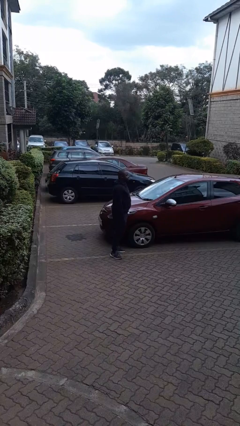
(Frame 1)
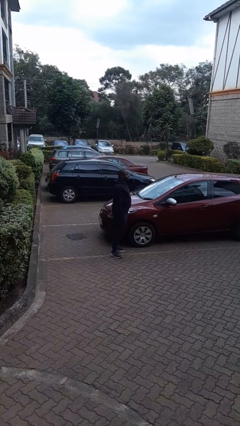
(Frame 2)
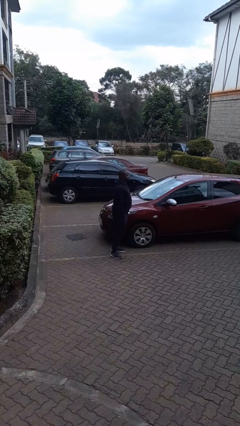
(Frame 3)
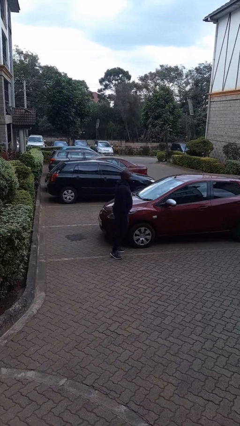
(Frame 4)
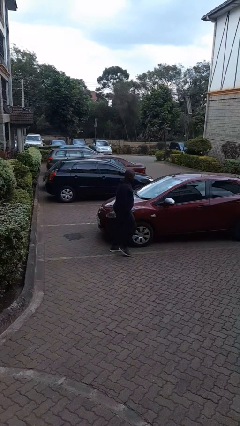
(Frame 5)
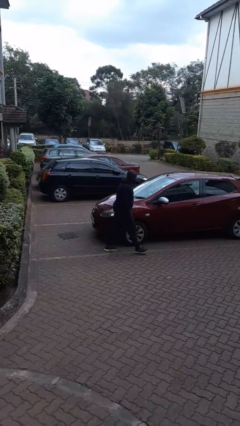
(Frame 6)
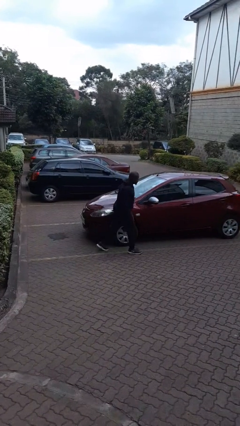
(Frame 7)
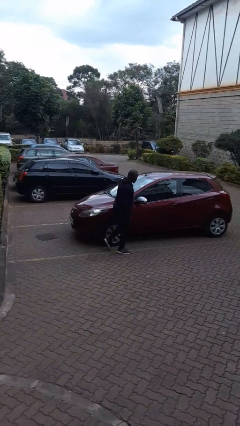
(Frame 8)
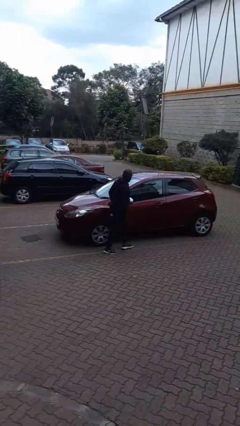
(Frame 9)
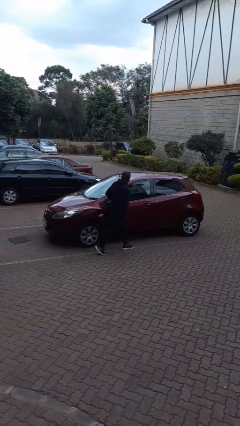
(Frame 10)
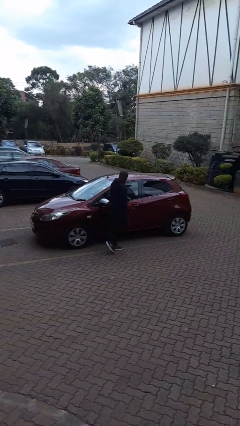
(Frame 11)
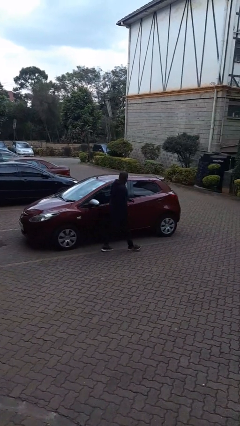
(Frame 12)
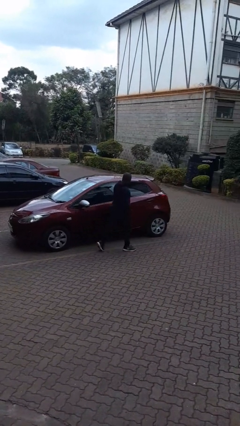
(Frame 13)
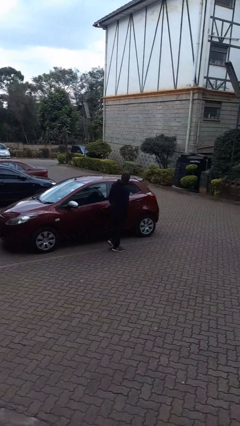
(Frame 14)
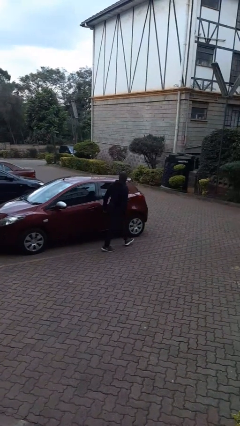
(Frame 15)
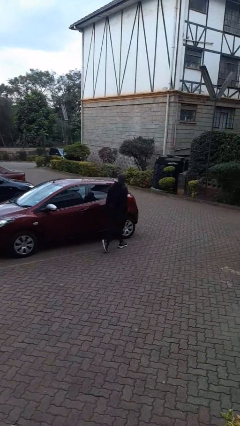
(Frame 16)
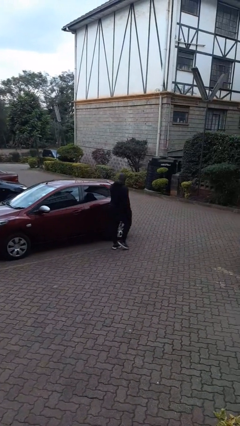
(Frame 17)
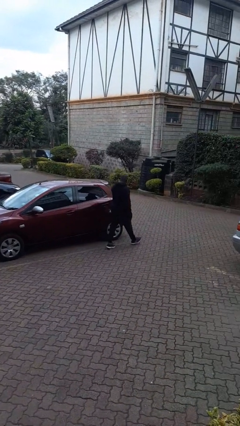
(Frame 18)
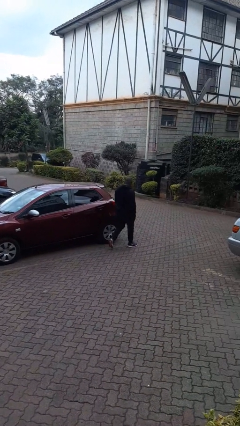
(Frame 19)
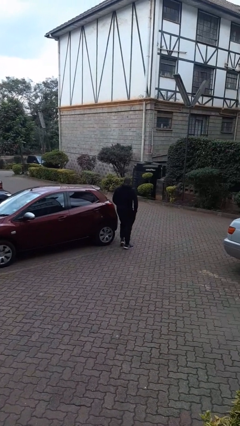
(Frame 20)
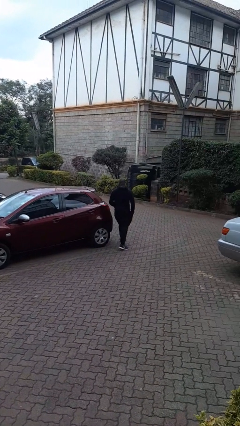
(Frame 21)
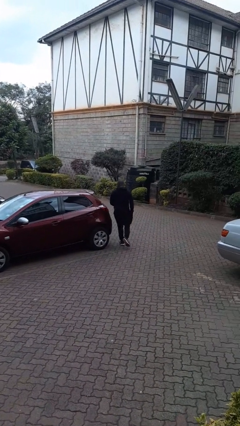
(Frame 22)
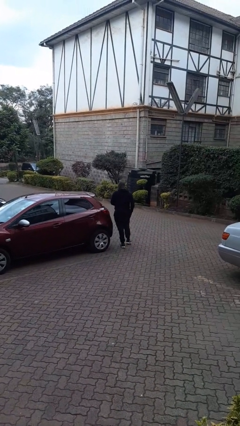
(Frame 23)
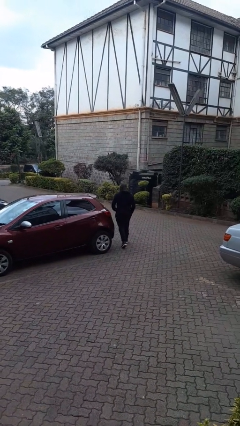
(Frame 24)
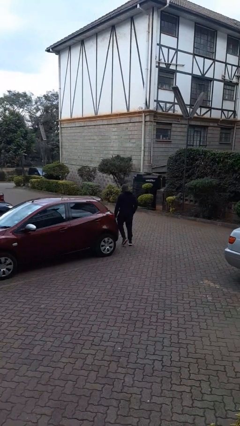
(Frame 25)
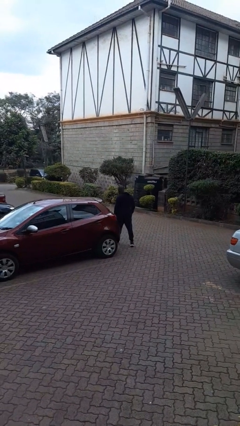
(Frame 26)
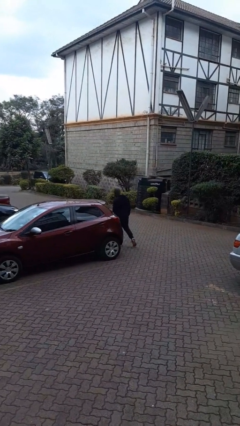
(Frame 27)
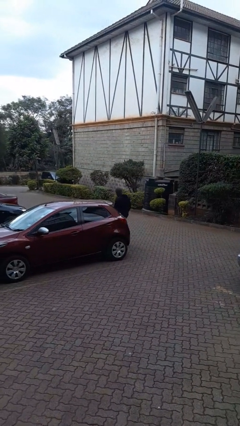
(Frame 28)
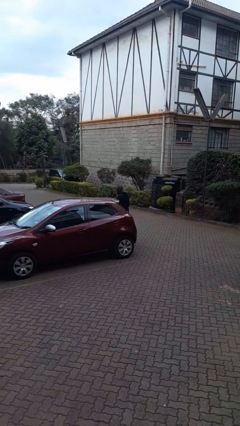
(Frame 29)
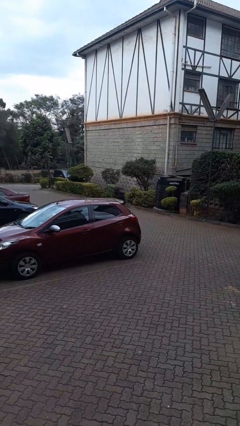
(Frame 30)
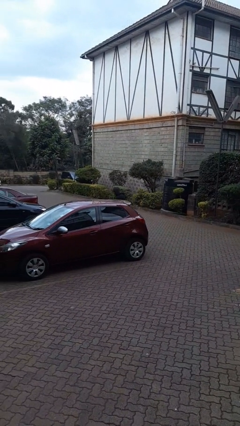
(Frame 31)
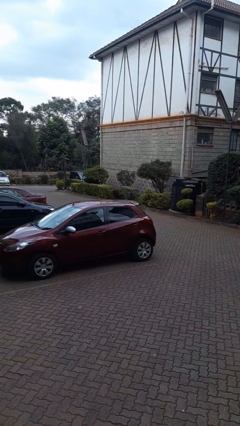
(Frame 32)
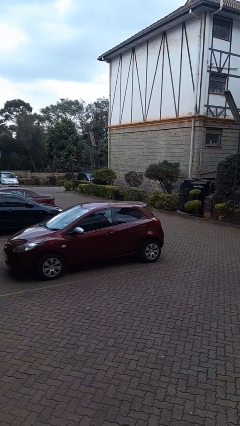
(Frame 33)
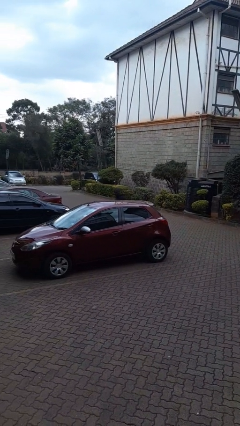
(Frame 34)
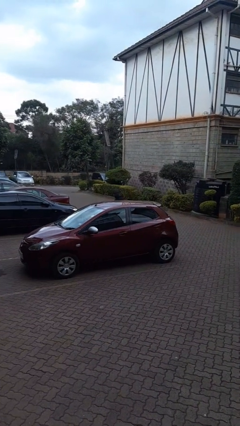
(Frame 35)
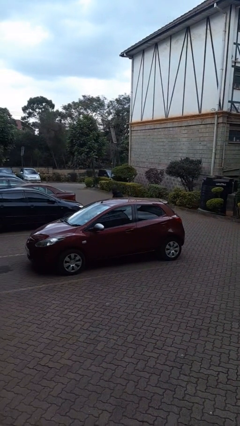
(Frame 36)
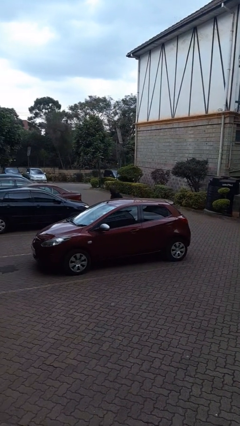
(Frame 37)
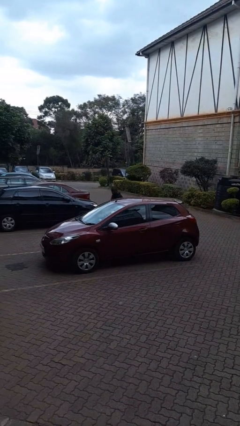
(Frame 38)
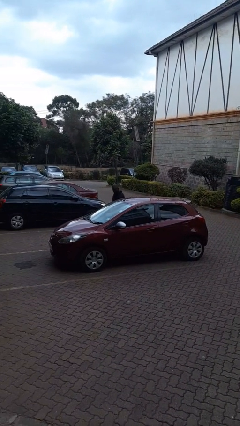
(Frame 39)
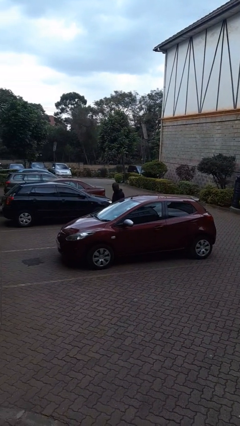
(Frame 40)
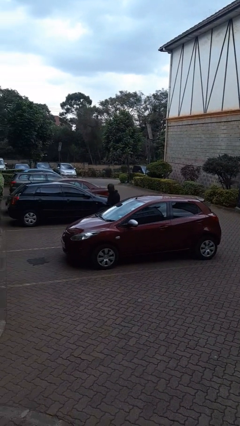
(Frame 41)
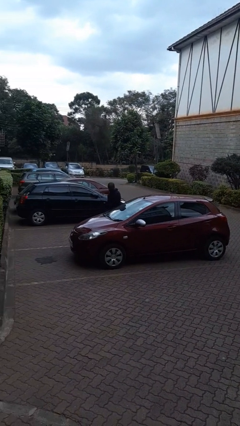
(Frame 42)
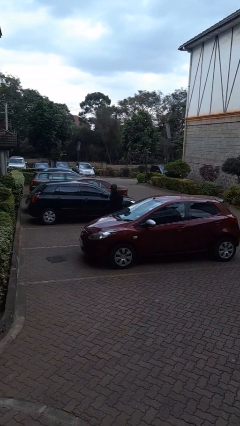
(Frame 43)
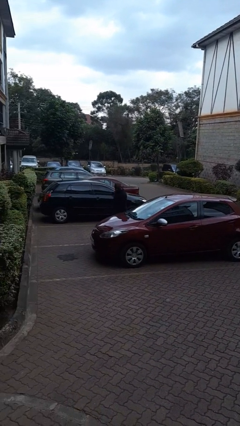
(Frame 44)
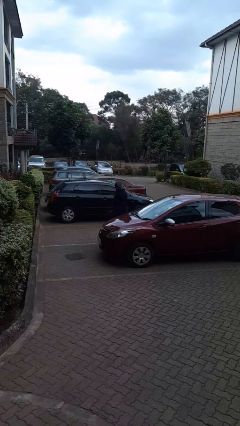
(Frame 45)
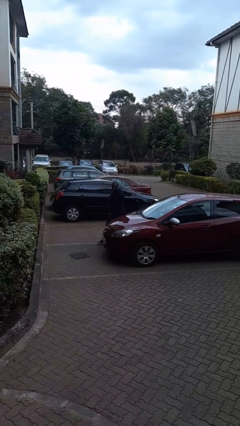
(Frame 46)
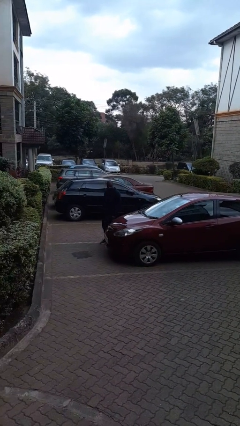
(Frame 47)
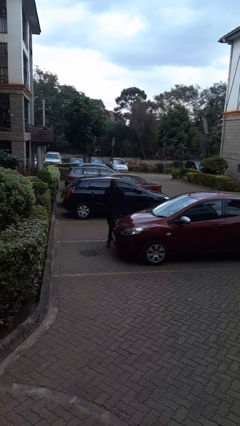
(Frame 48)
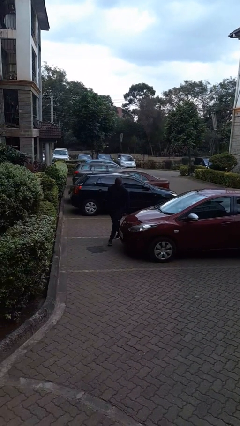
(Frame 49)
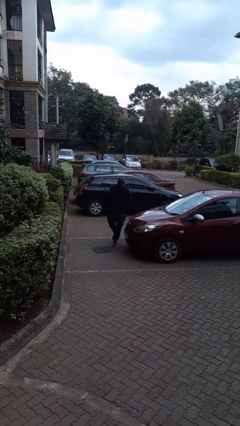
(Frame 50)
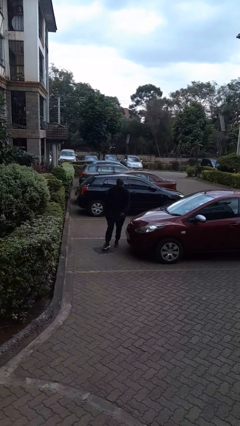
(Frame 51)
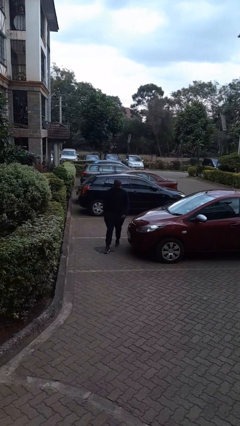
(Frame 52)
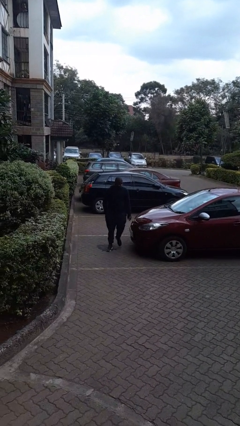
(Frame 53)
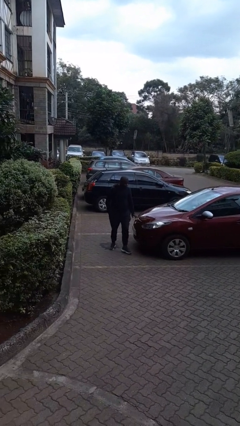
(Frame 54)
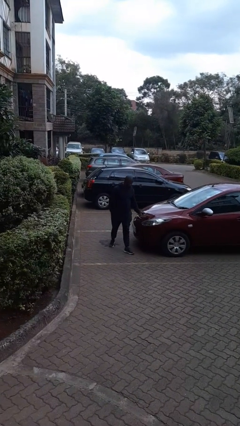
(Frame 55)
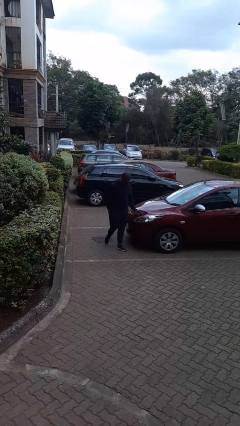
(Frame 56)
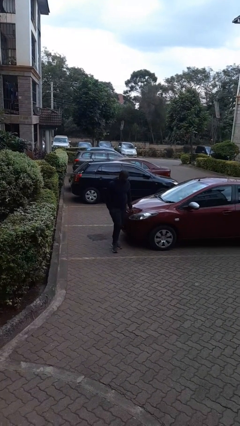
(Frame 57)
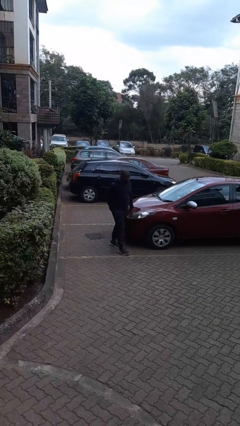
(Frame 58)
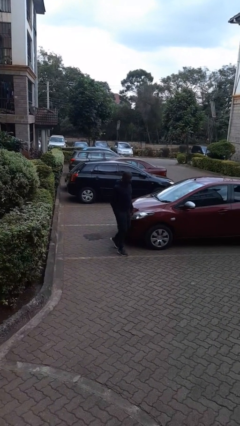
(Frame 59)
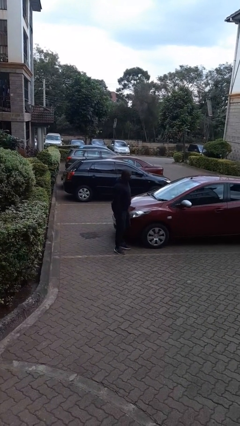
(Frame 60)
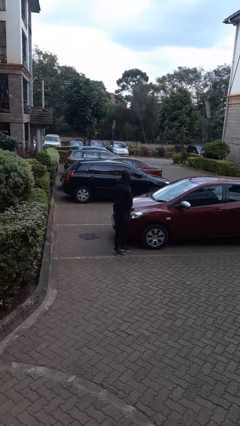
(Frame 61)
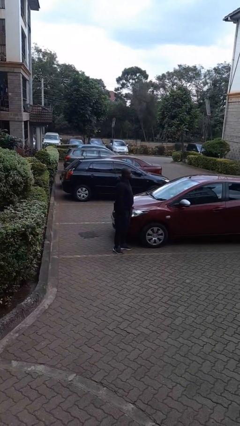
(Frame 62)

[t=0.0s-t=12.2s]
person walks around car

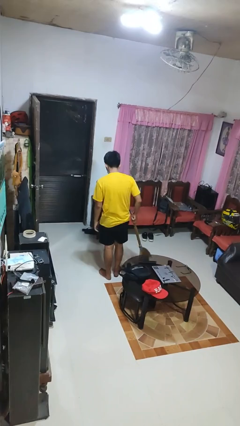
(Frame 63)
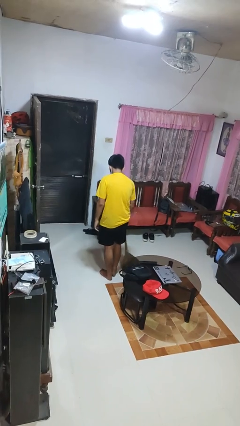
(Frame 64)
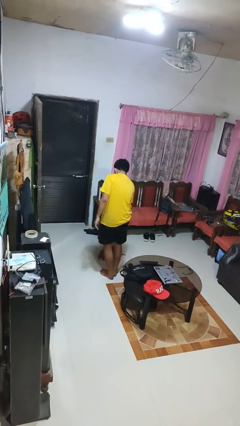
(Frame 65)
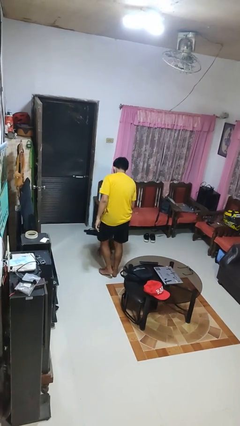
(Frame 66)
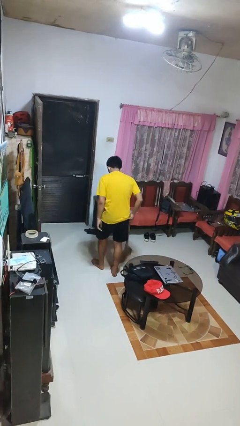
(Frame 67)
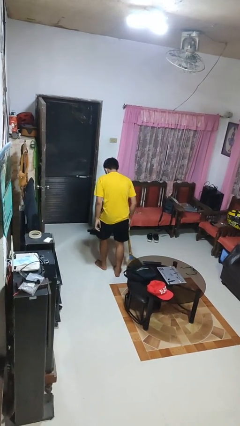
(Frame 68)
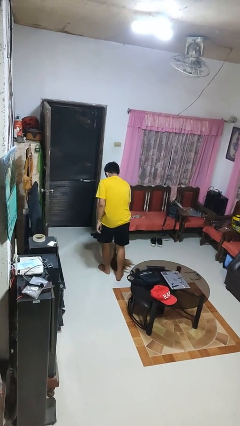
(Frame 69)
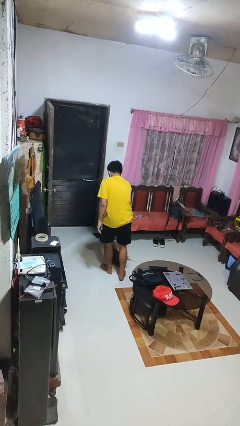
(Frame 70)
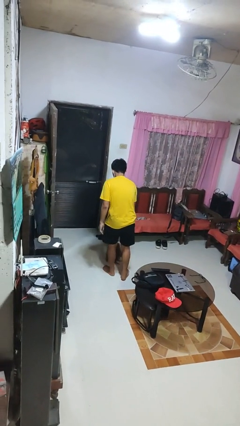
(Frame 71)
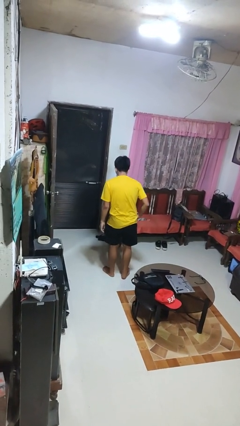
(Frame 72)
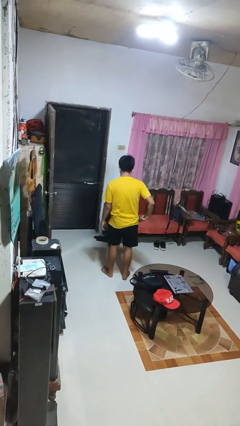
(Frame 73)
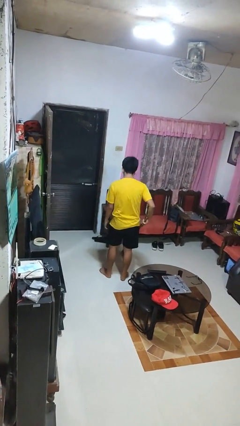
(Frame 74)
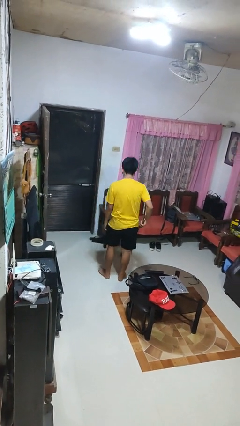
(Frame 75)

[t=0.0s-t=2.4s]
person sweeps floor

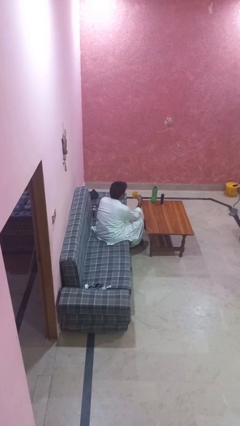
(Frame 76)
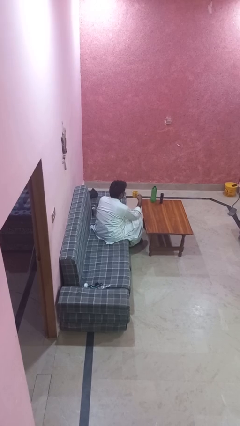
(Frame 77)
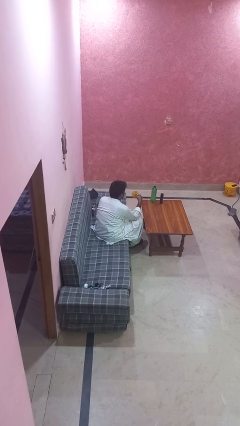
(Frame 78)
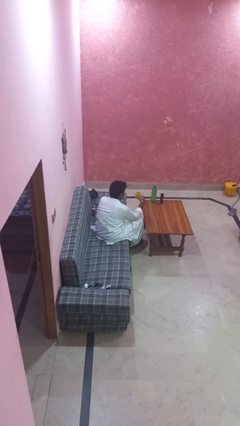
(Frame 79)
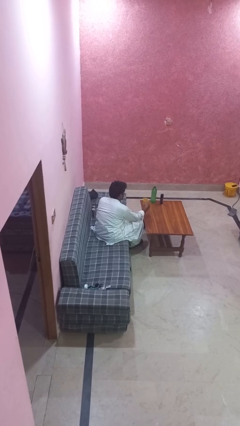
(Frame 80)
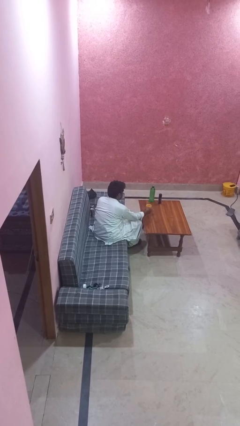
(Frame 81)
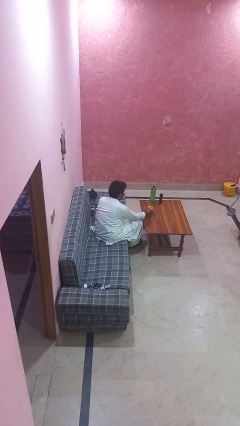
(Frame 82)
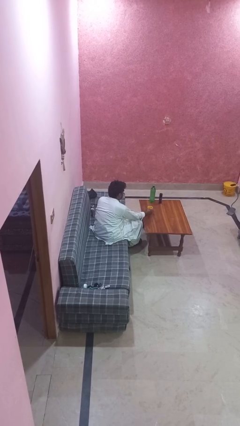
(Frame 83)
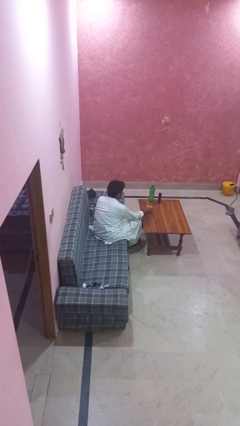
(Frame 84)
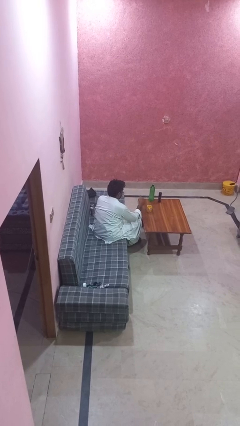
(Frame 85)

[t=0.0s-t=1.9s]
person puts down object on table

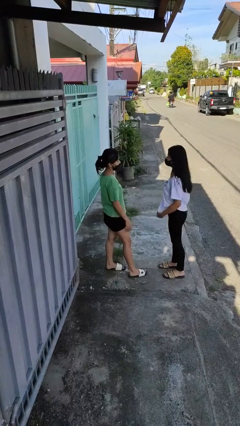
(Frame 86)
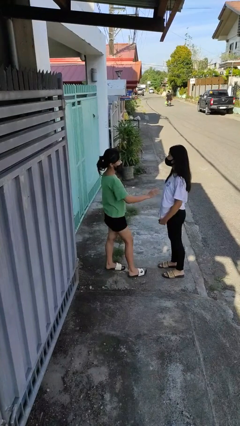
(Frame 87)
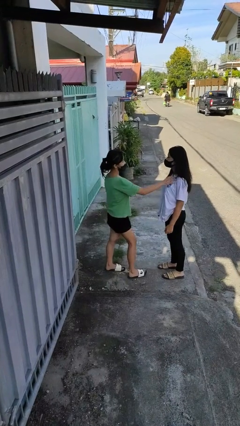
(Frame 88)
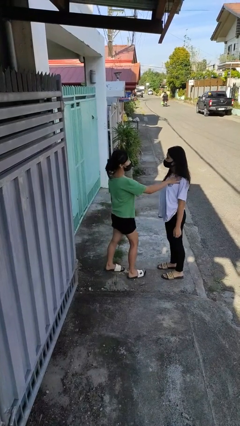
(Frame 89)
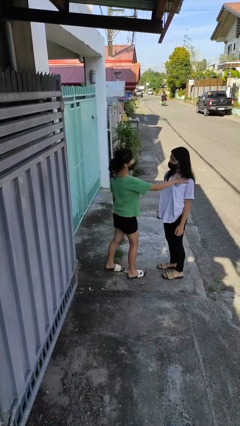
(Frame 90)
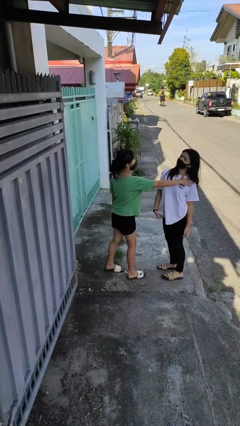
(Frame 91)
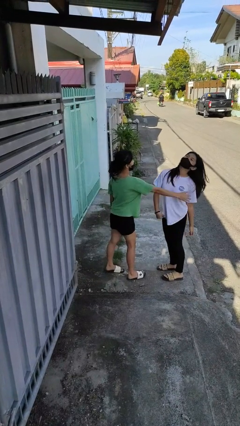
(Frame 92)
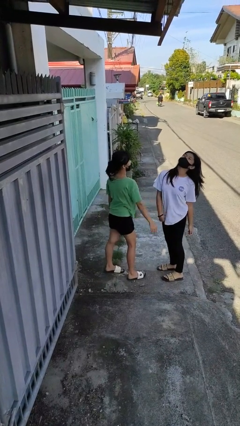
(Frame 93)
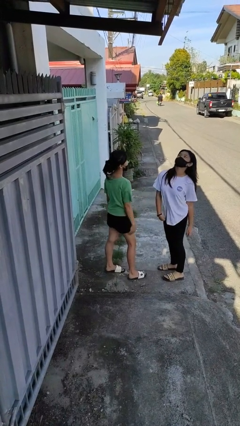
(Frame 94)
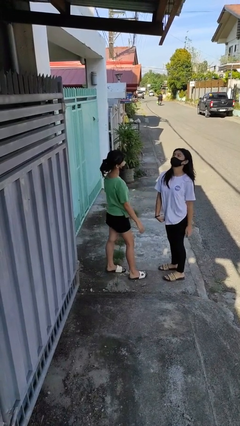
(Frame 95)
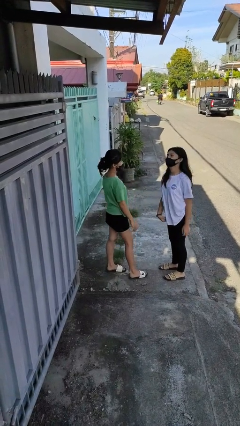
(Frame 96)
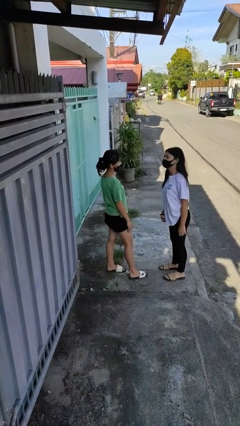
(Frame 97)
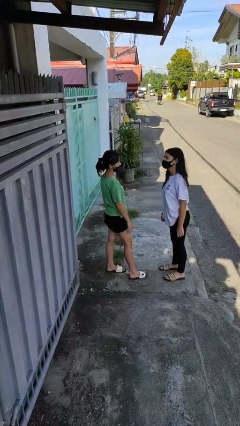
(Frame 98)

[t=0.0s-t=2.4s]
person shoves person
